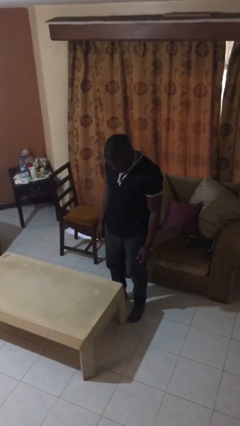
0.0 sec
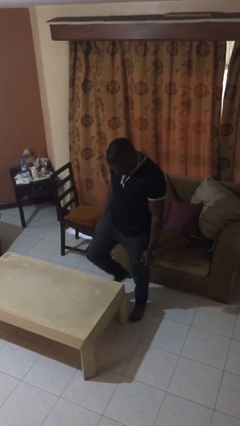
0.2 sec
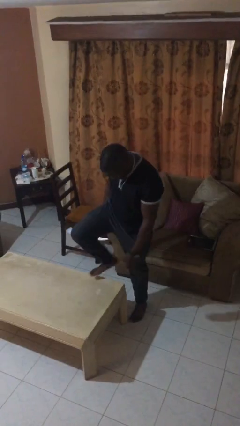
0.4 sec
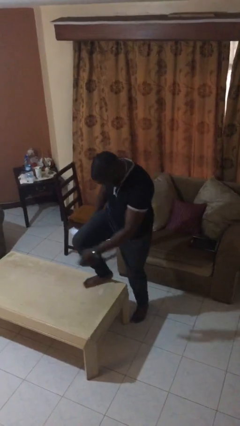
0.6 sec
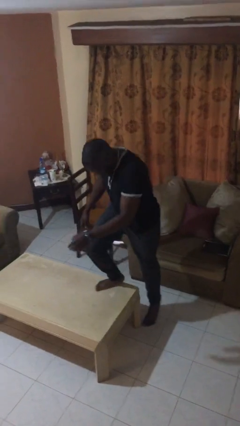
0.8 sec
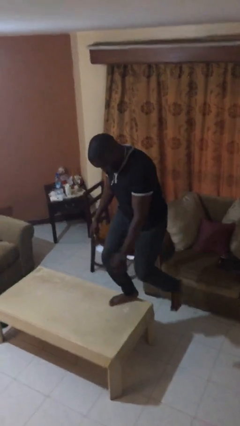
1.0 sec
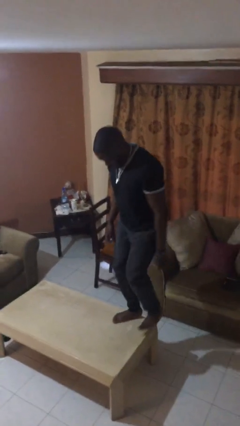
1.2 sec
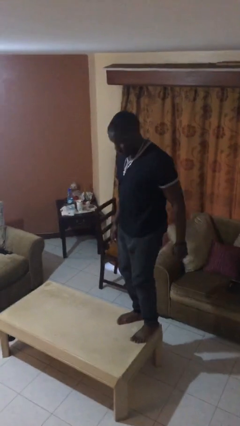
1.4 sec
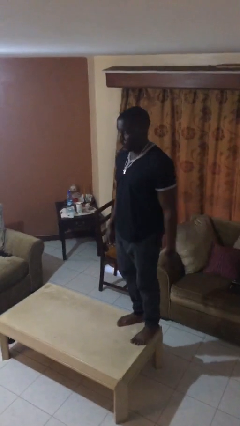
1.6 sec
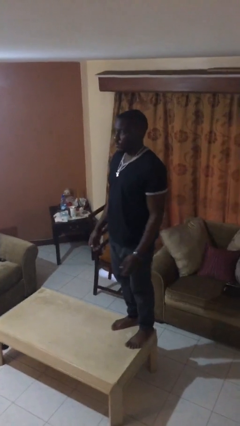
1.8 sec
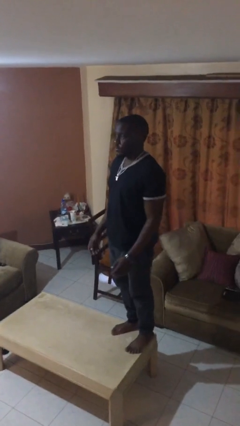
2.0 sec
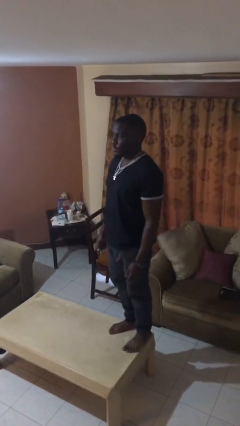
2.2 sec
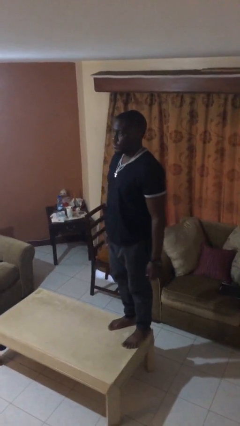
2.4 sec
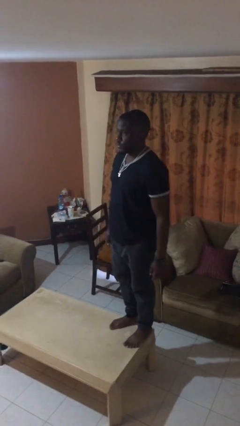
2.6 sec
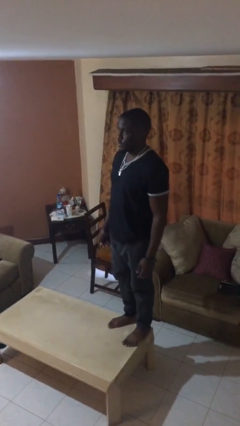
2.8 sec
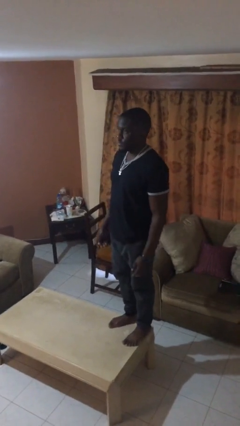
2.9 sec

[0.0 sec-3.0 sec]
person climbs on table

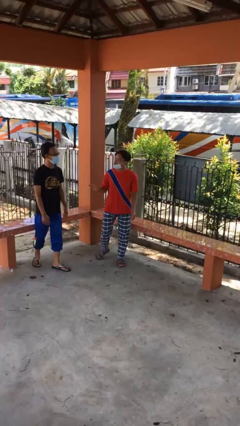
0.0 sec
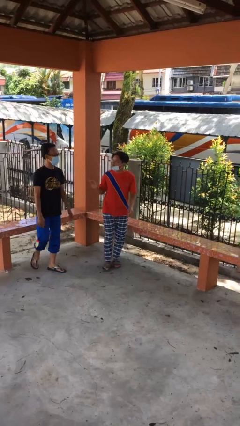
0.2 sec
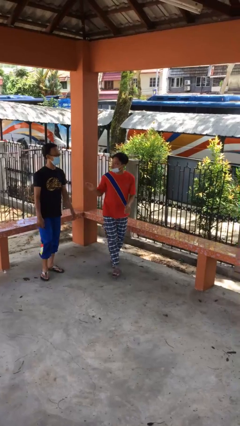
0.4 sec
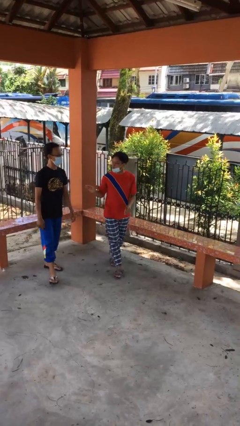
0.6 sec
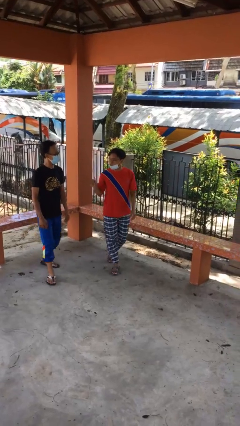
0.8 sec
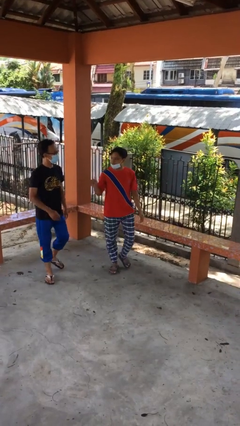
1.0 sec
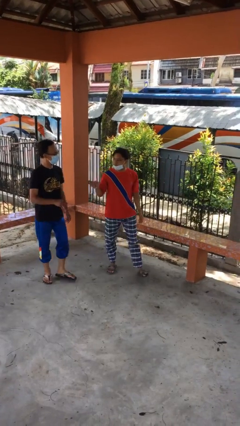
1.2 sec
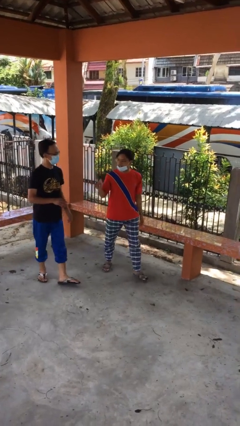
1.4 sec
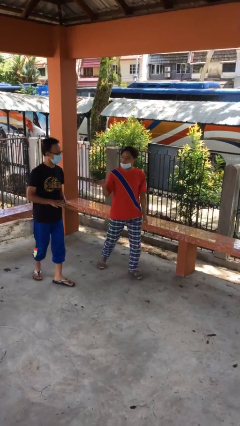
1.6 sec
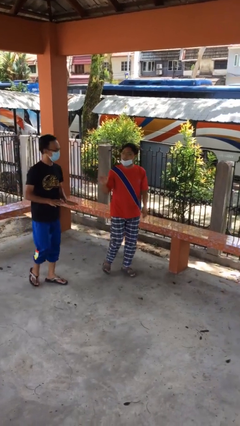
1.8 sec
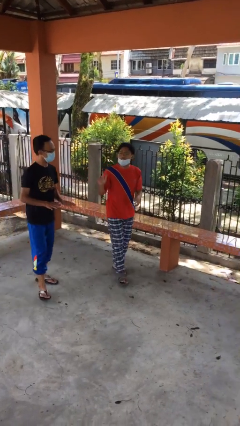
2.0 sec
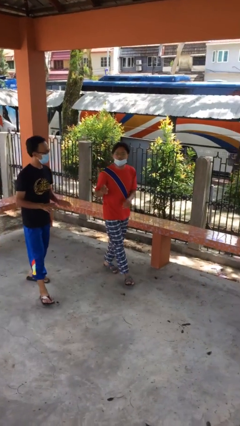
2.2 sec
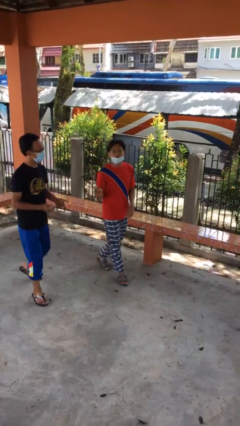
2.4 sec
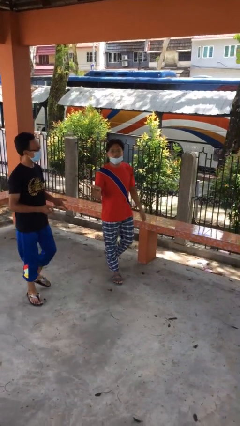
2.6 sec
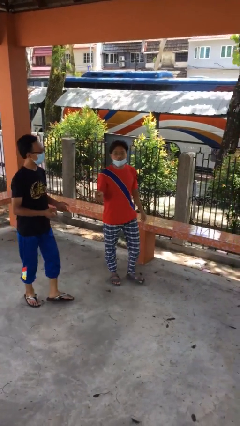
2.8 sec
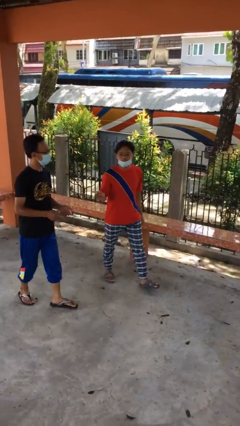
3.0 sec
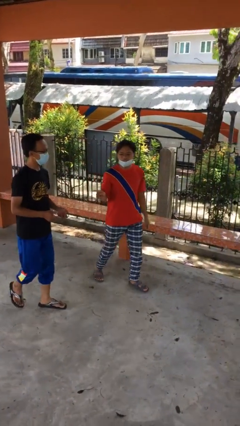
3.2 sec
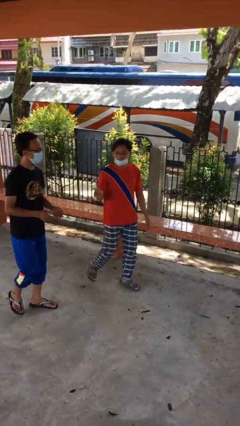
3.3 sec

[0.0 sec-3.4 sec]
person talks to person

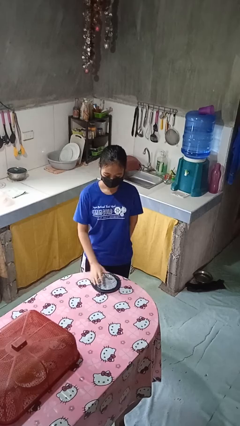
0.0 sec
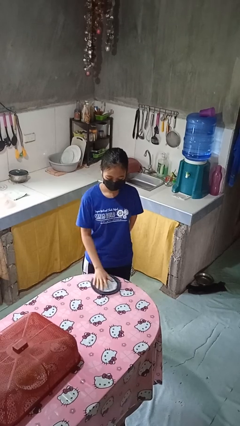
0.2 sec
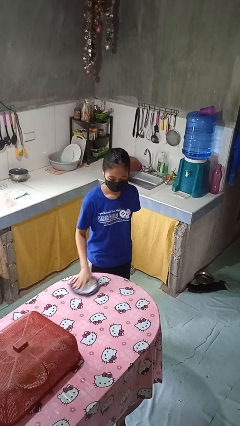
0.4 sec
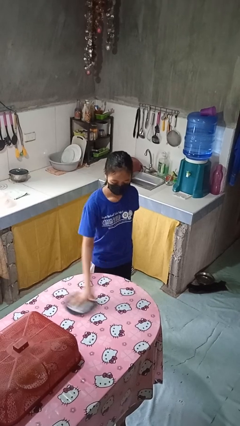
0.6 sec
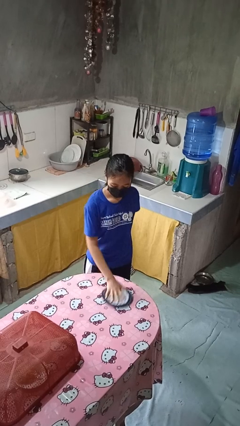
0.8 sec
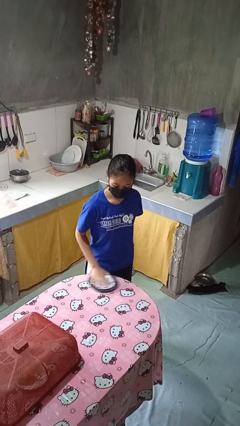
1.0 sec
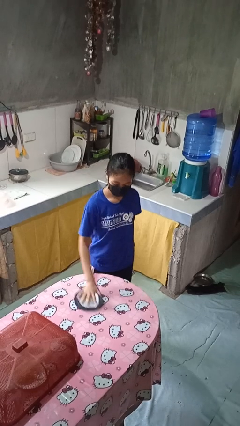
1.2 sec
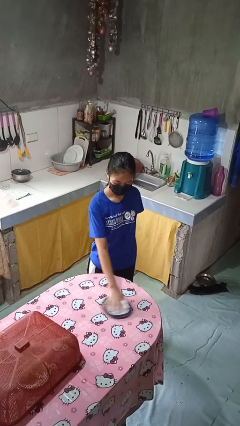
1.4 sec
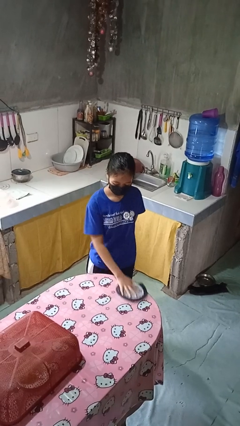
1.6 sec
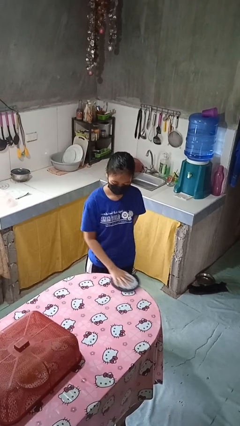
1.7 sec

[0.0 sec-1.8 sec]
person cleans table with rag

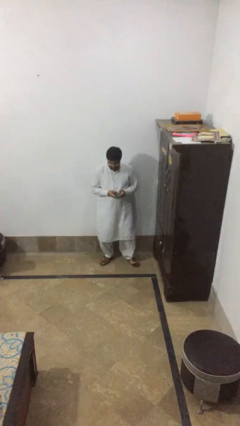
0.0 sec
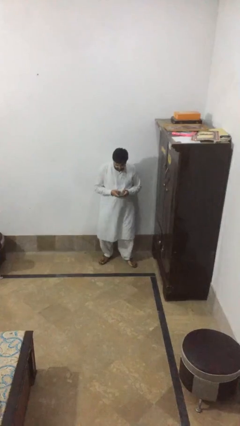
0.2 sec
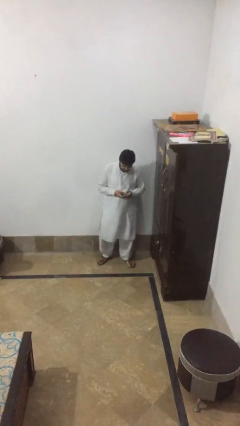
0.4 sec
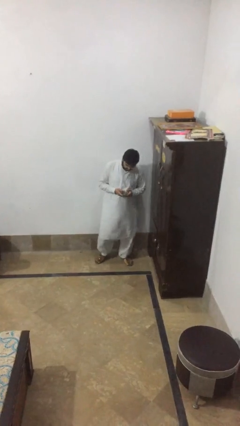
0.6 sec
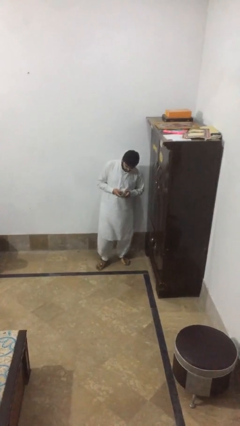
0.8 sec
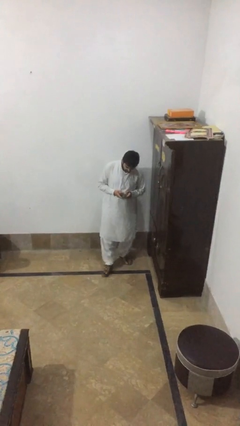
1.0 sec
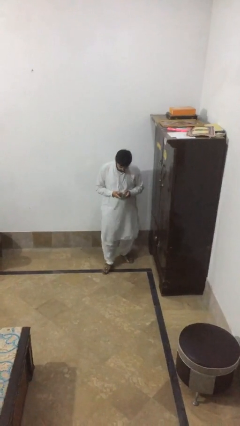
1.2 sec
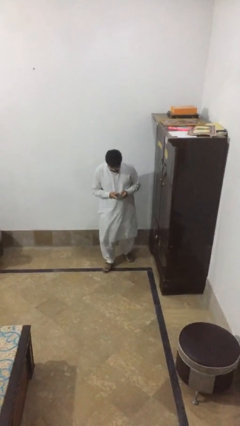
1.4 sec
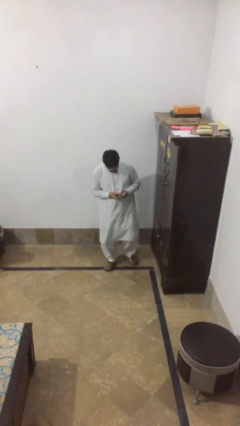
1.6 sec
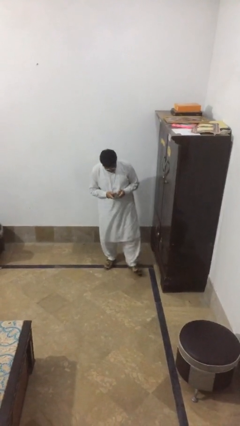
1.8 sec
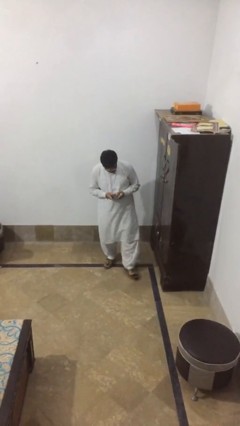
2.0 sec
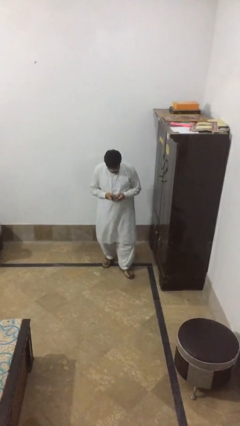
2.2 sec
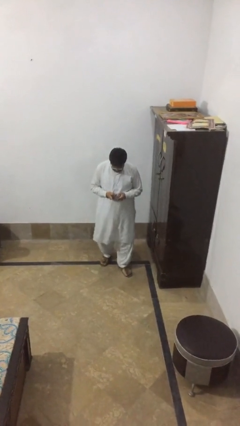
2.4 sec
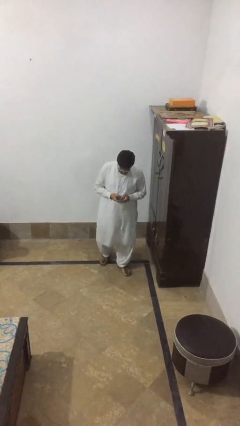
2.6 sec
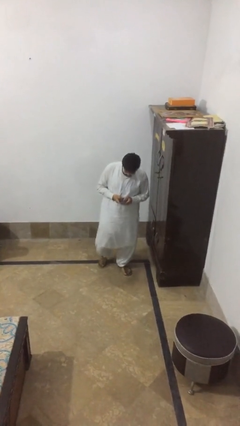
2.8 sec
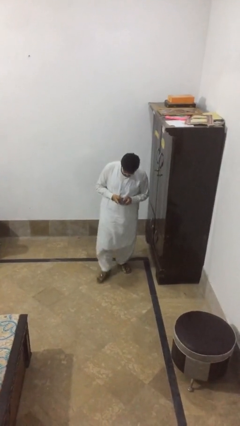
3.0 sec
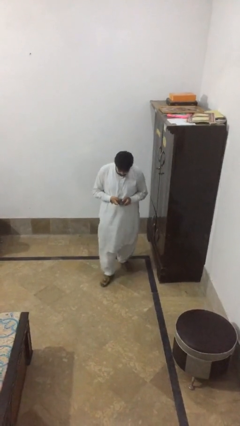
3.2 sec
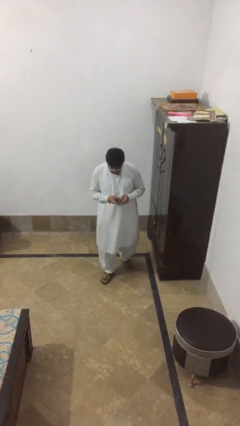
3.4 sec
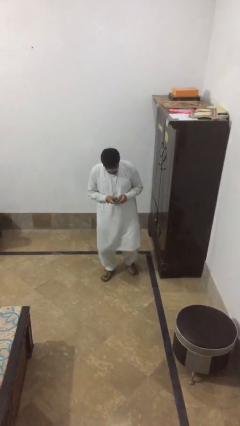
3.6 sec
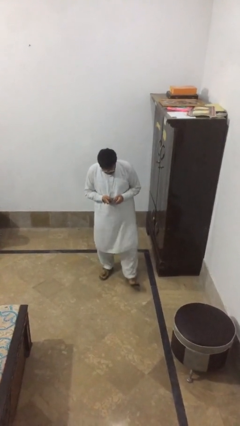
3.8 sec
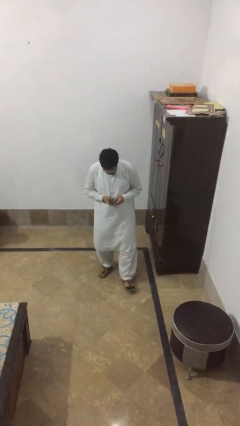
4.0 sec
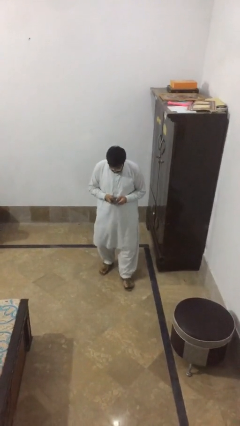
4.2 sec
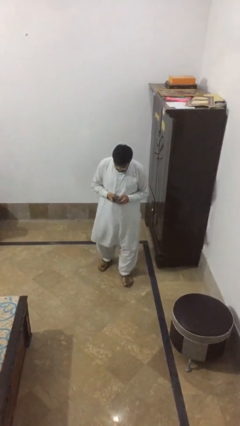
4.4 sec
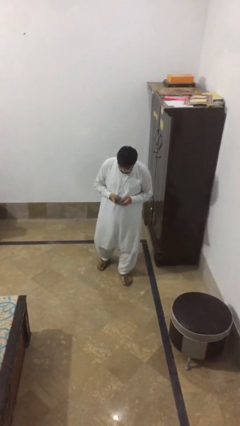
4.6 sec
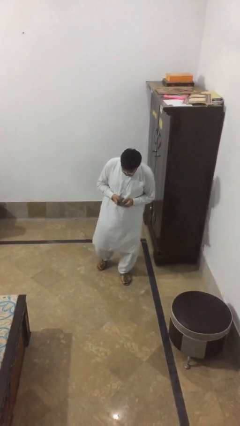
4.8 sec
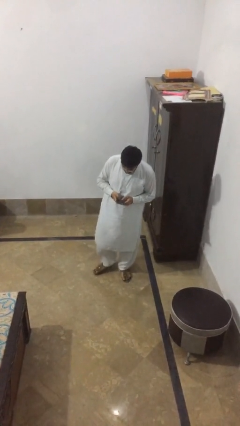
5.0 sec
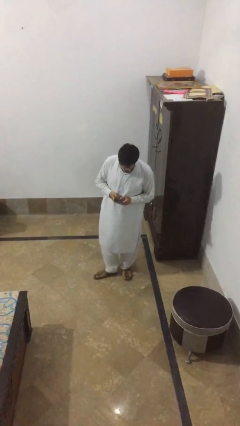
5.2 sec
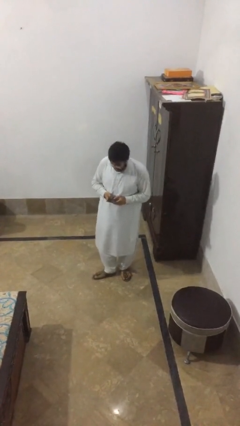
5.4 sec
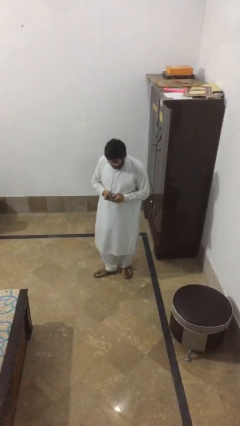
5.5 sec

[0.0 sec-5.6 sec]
person texts on phone

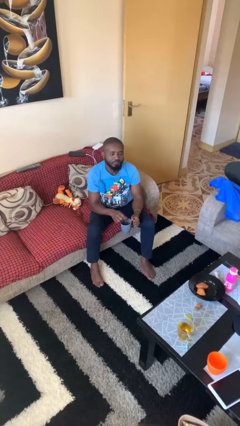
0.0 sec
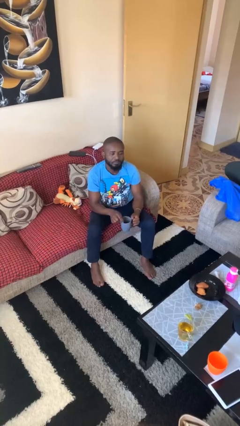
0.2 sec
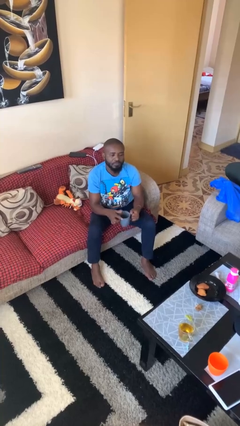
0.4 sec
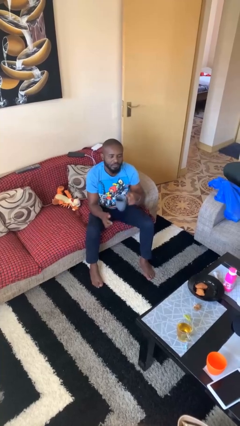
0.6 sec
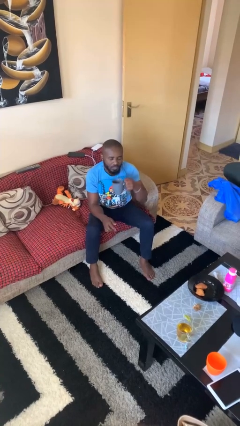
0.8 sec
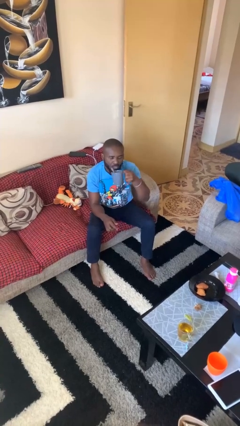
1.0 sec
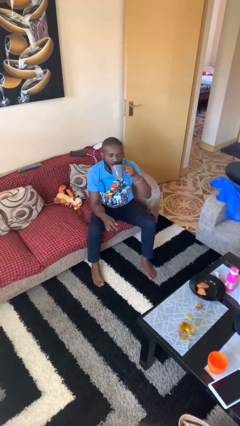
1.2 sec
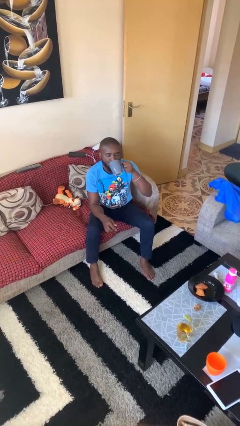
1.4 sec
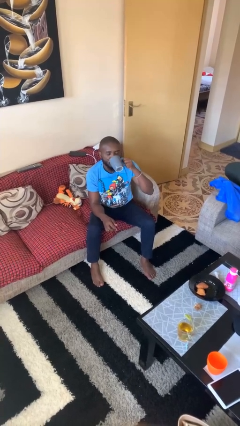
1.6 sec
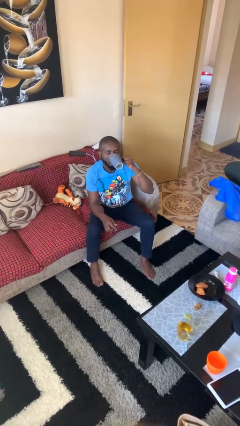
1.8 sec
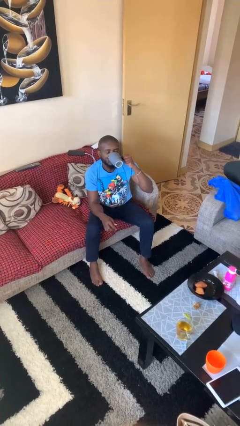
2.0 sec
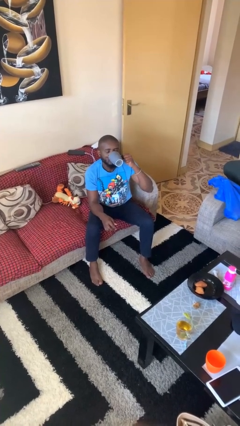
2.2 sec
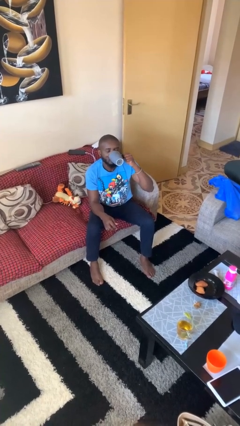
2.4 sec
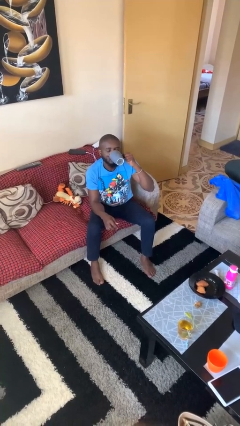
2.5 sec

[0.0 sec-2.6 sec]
person drinks from mug

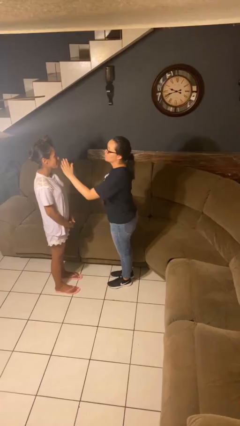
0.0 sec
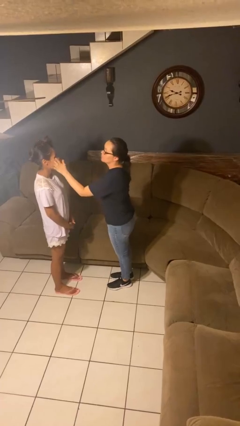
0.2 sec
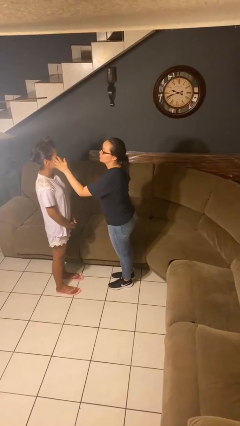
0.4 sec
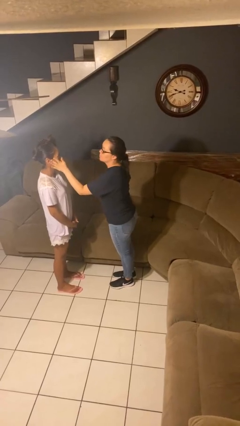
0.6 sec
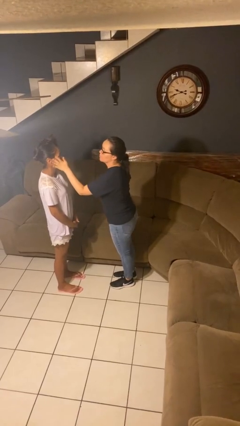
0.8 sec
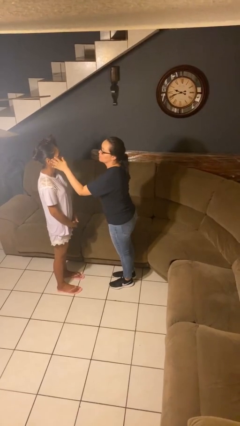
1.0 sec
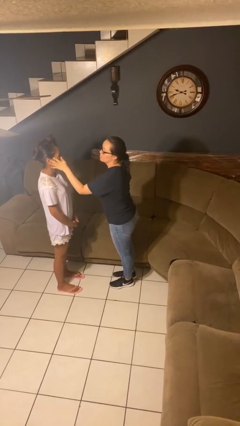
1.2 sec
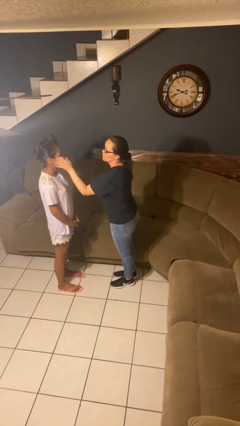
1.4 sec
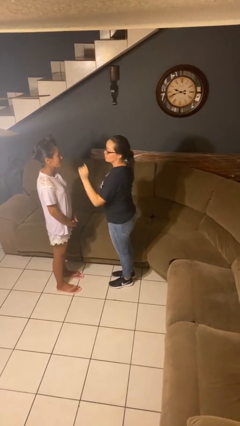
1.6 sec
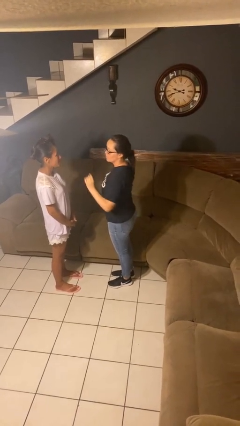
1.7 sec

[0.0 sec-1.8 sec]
person touches face of person
